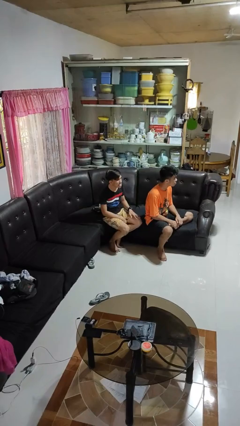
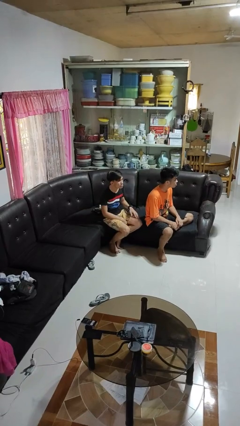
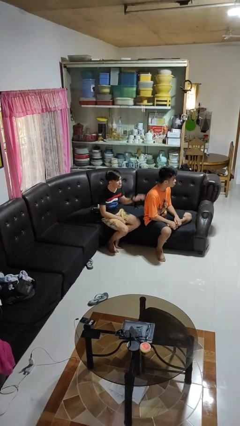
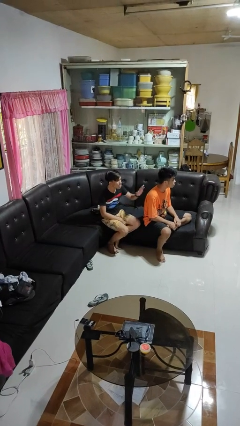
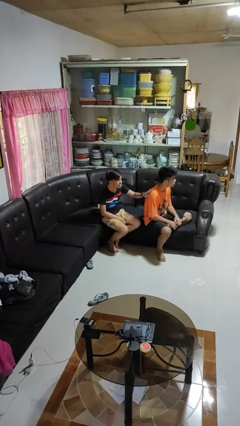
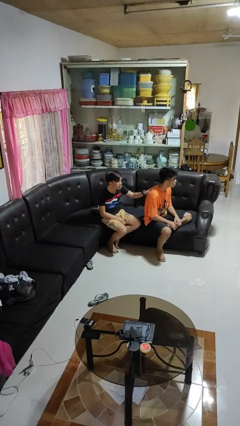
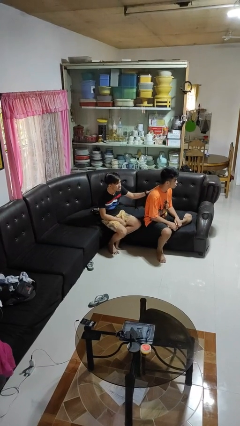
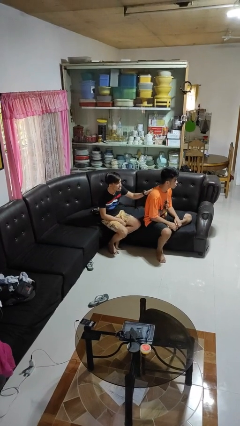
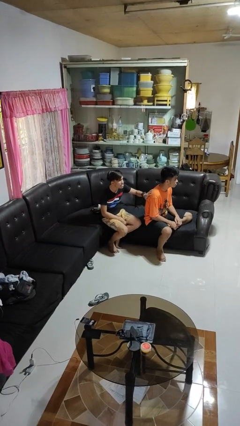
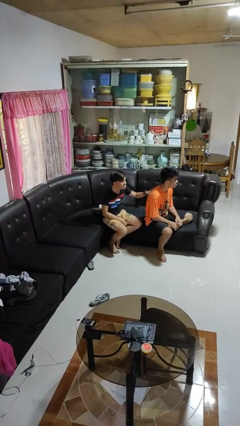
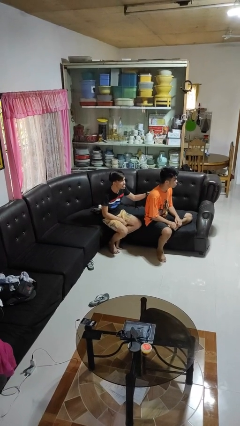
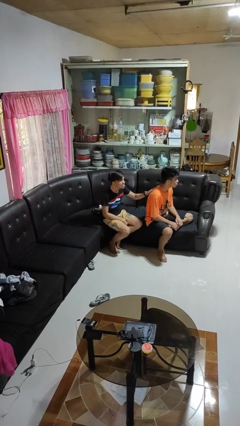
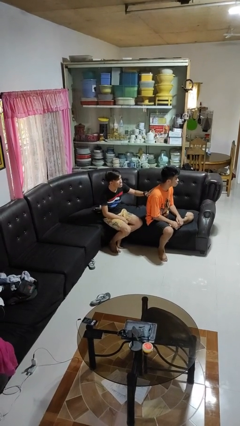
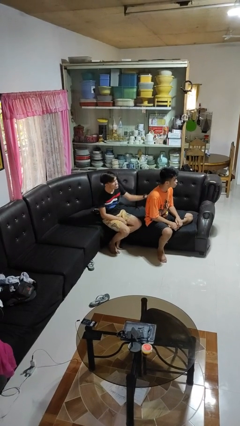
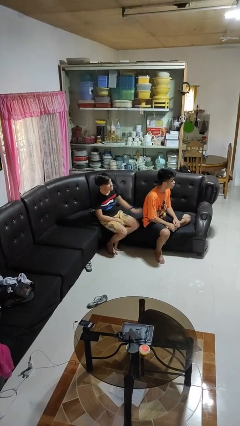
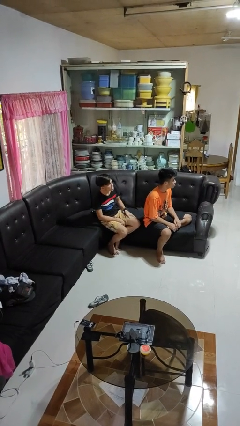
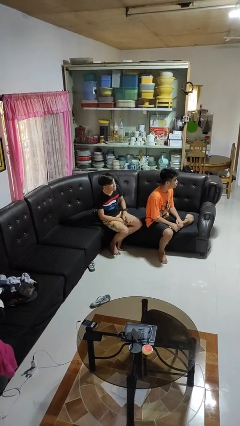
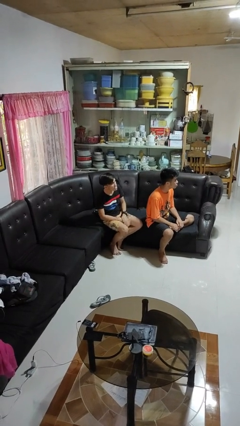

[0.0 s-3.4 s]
person touches back of person

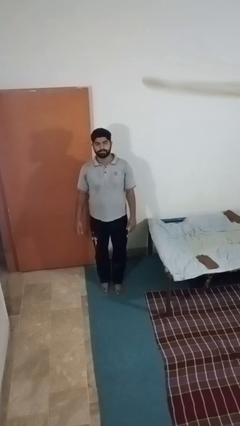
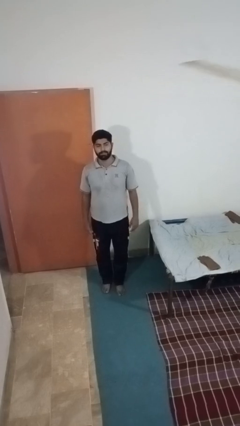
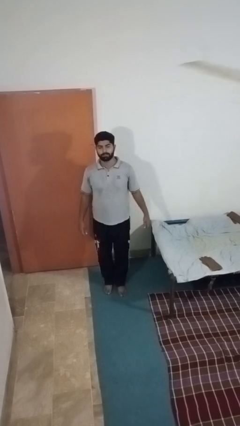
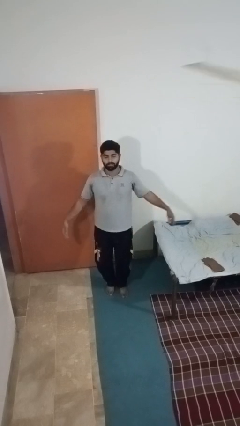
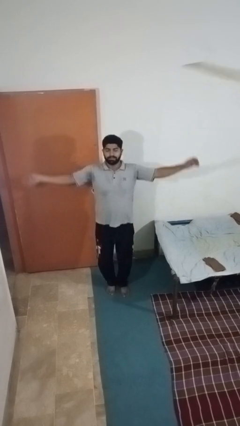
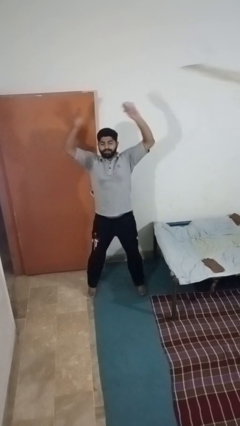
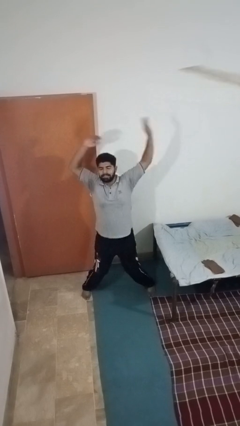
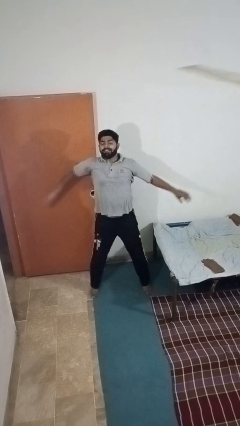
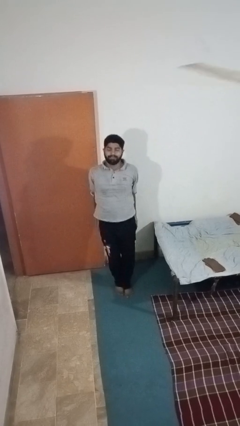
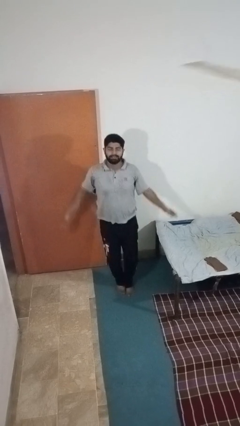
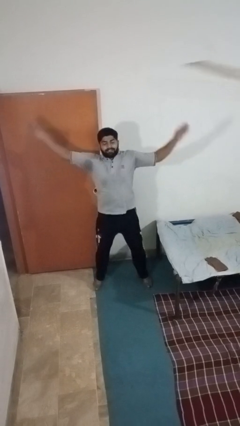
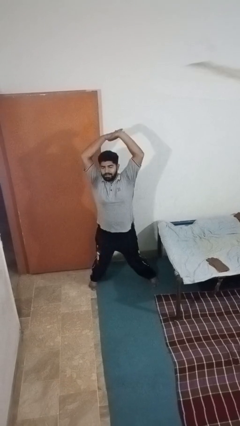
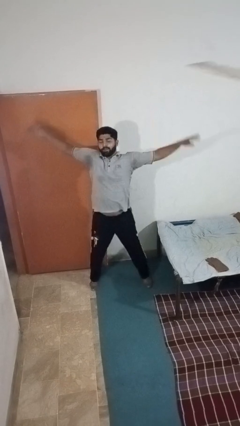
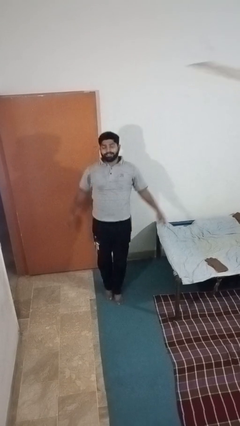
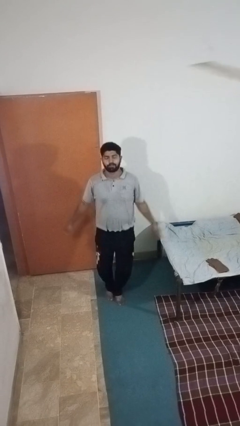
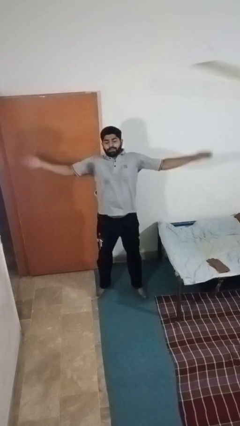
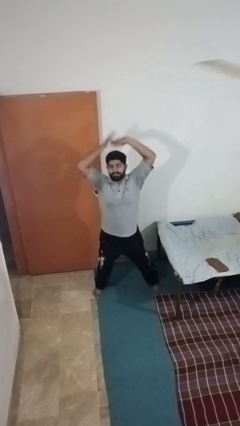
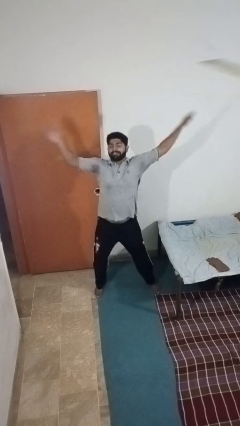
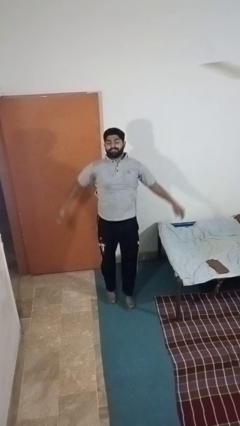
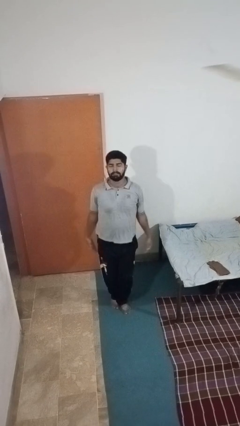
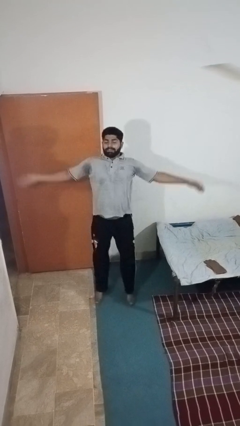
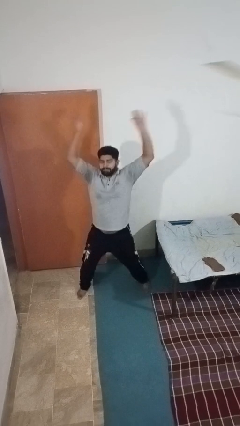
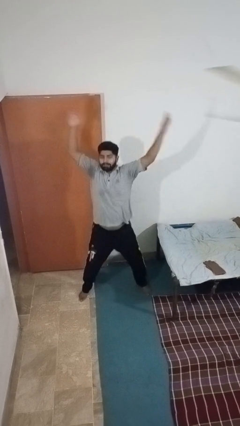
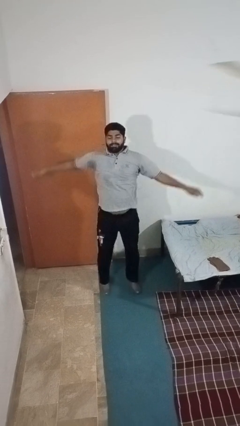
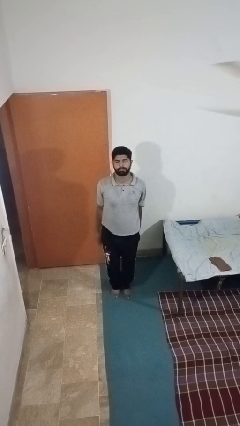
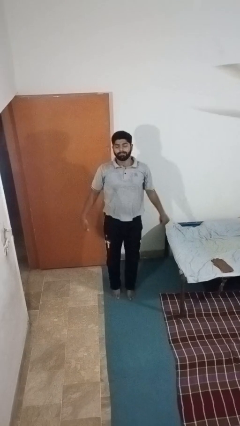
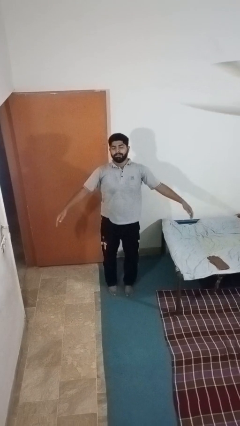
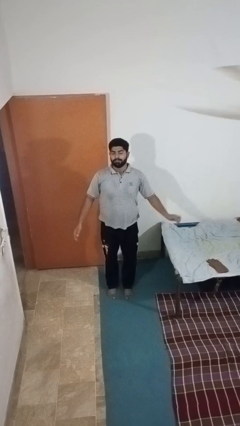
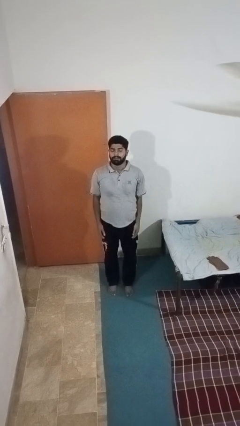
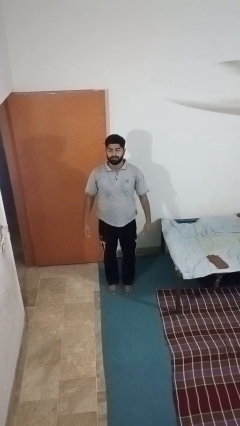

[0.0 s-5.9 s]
person exercises with jumping jacks

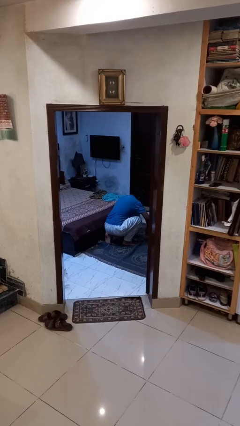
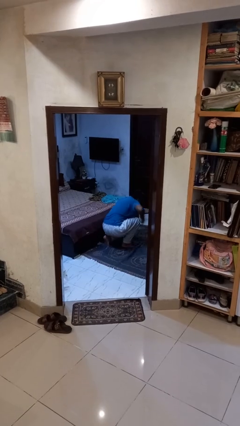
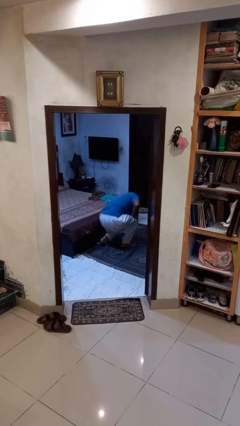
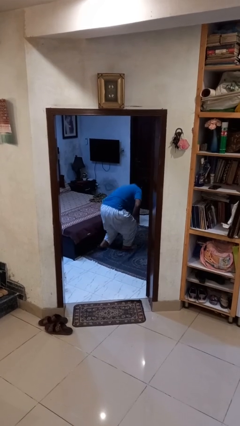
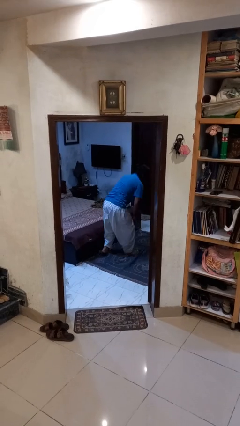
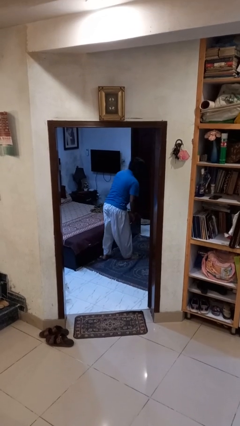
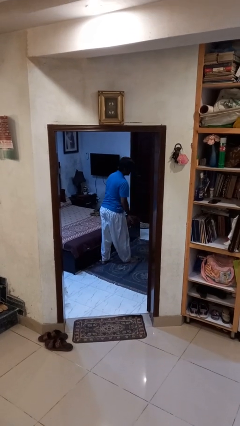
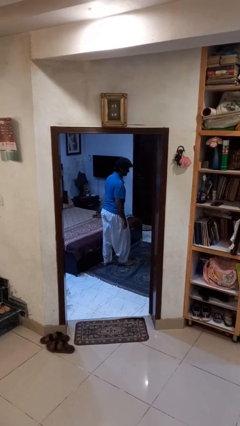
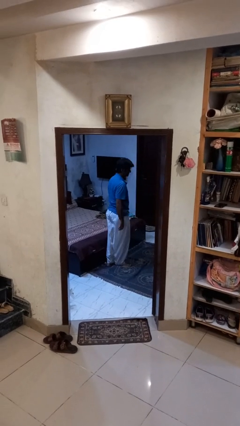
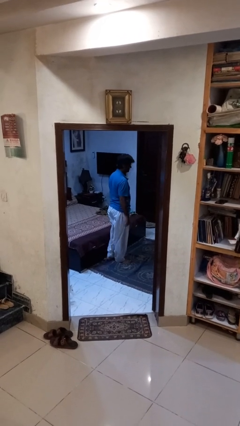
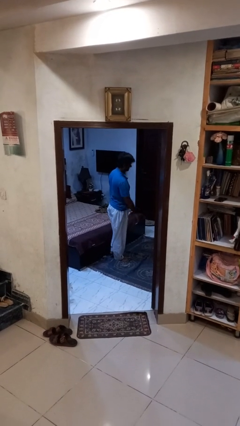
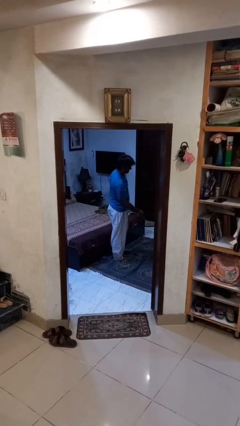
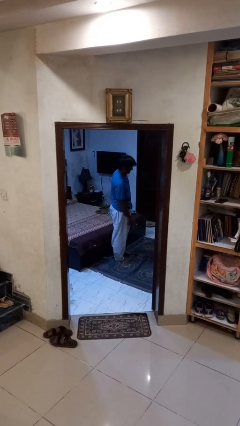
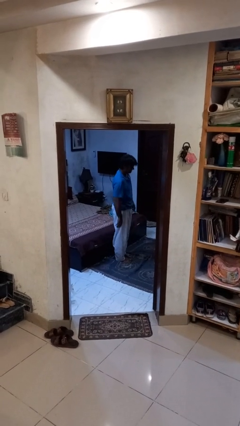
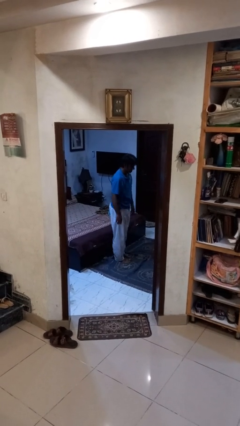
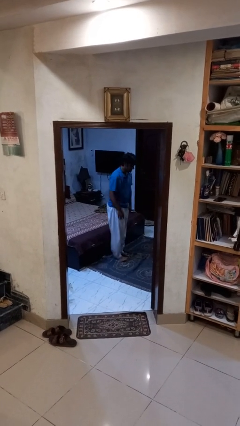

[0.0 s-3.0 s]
person stands up from floor

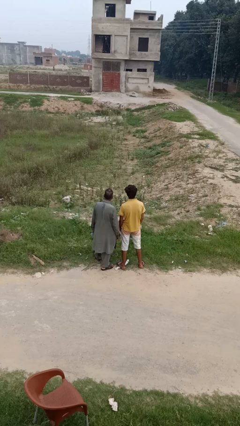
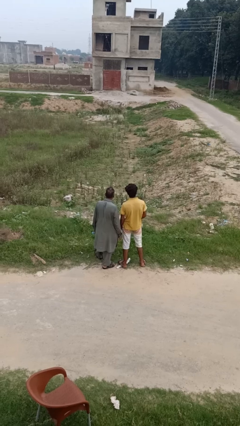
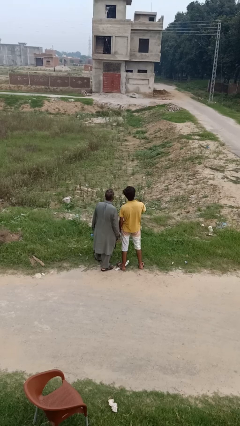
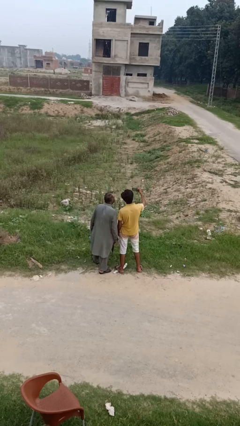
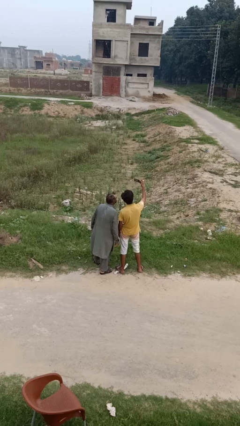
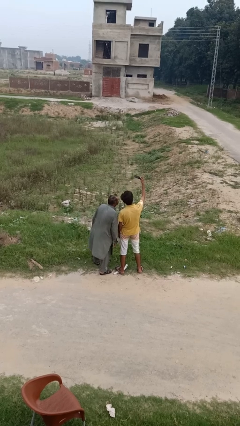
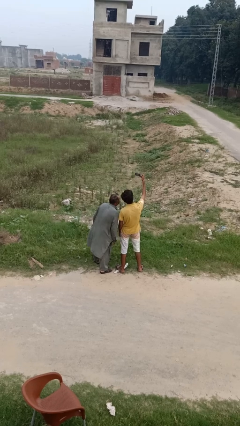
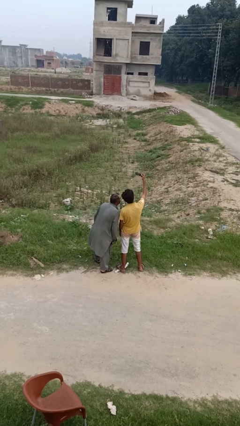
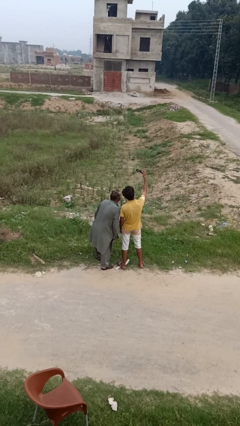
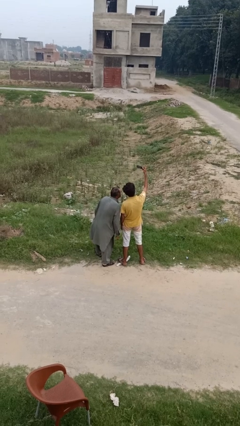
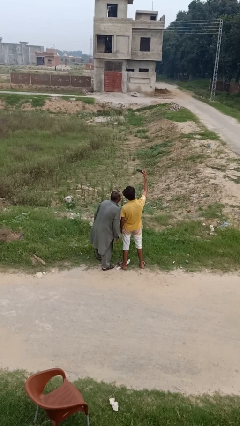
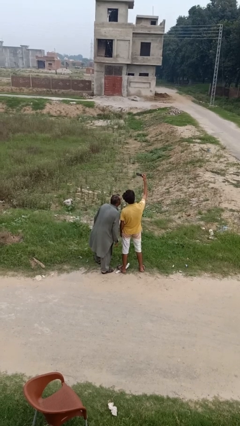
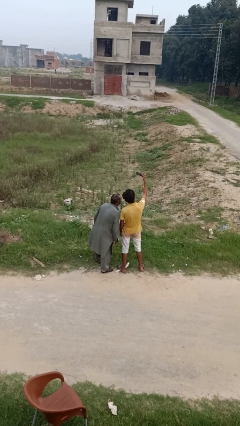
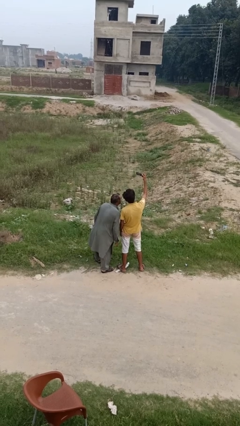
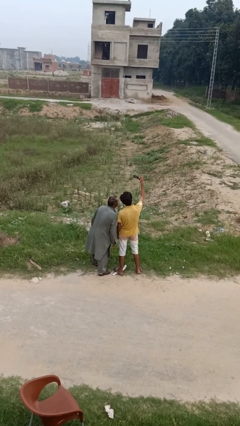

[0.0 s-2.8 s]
person takes selfie with person

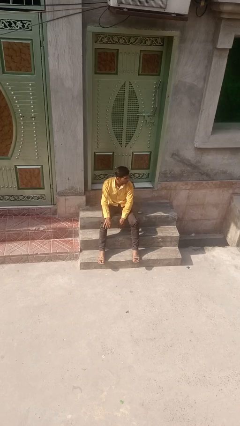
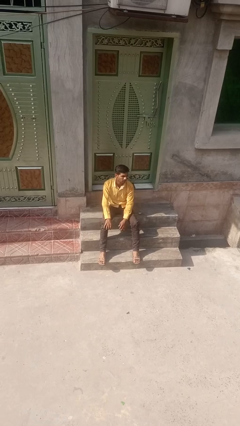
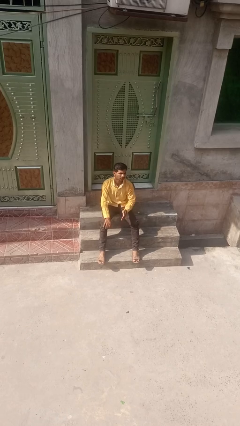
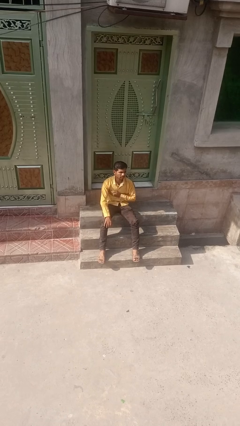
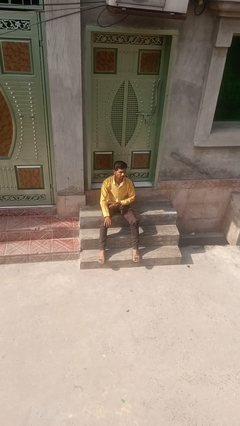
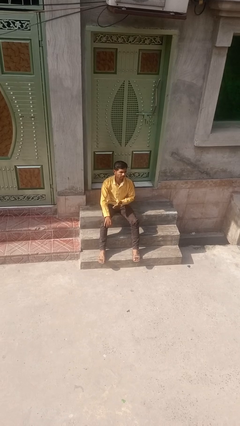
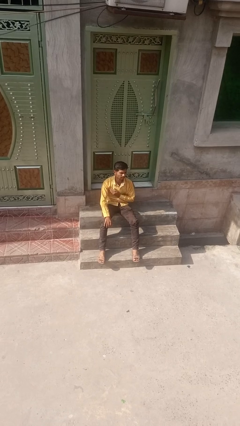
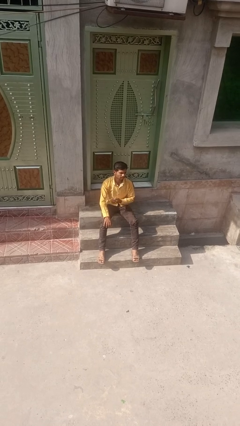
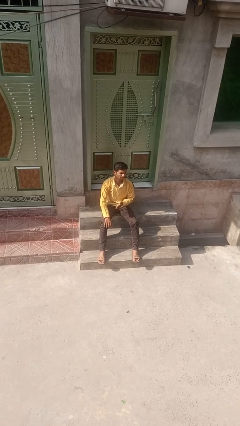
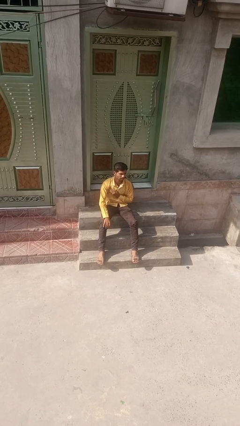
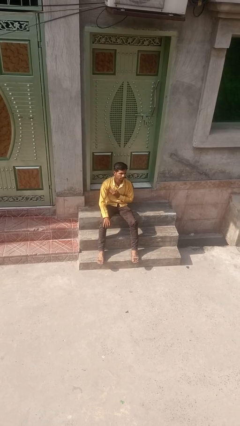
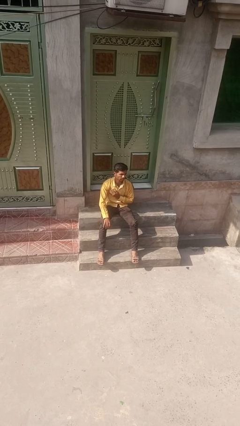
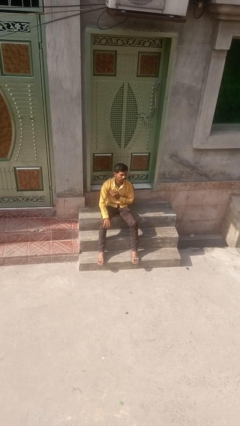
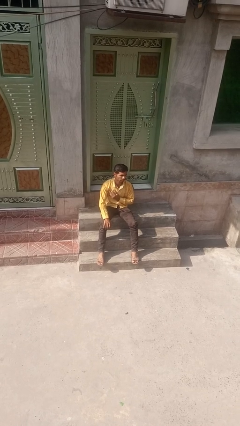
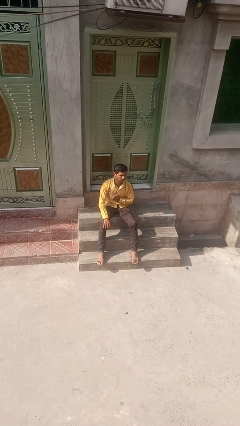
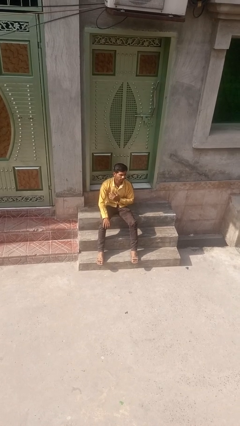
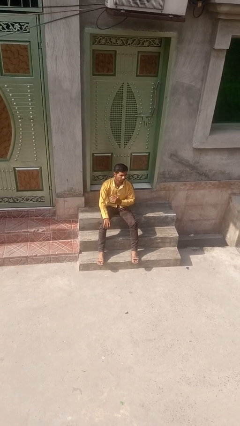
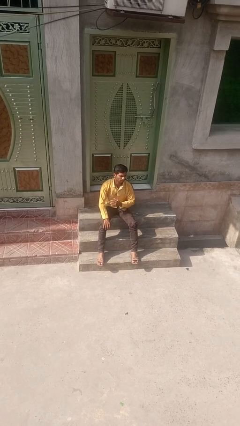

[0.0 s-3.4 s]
person drums on chest
